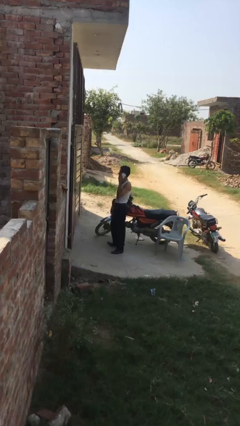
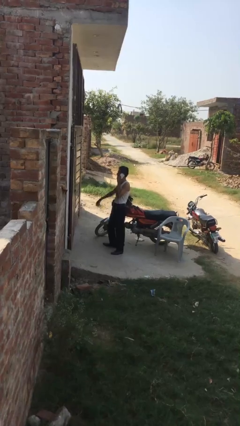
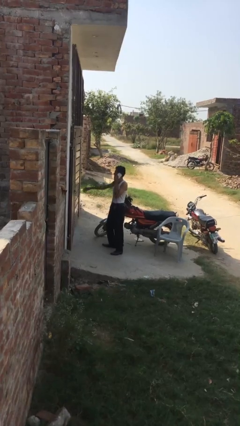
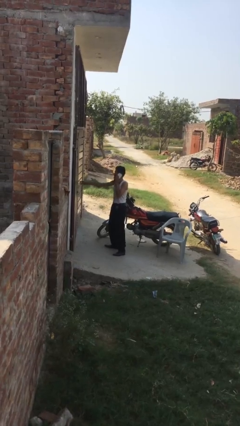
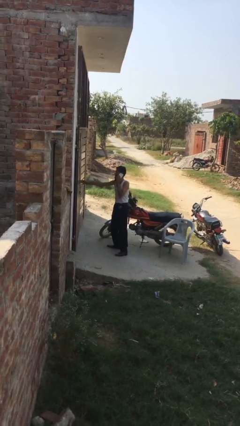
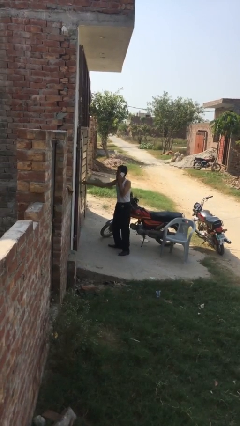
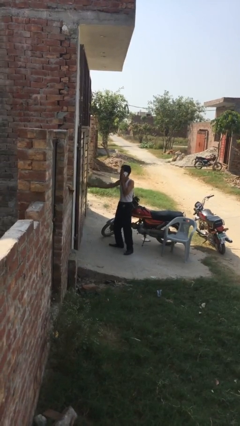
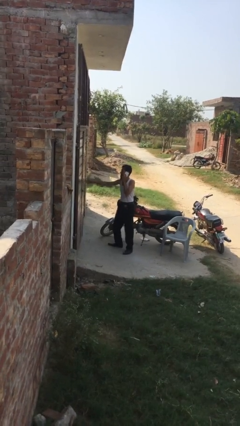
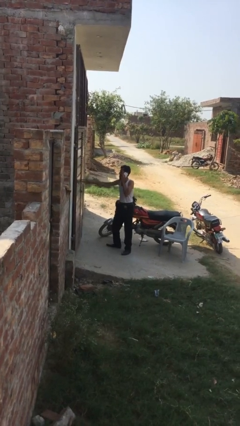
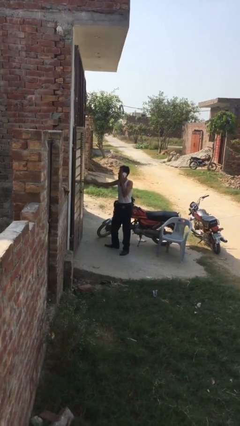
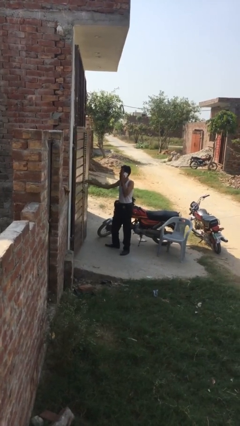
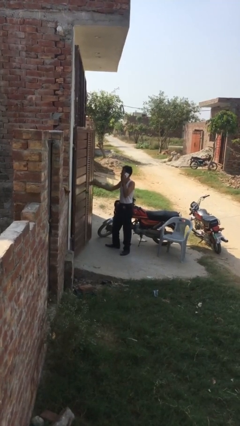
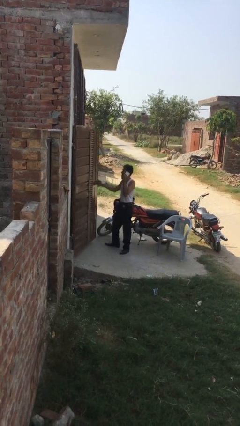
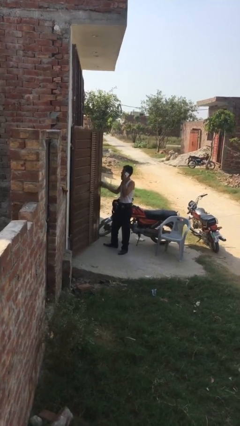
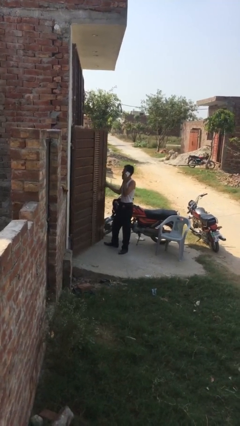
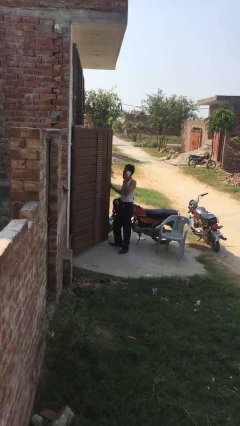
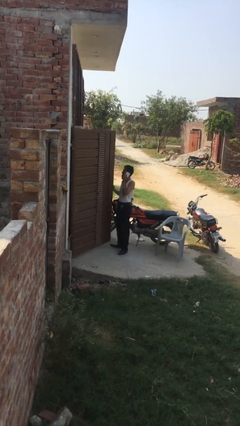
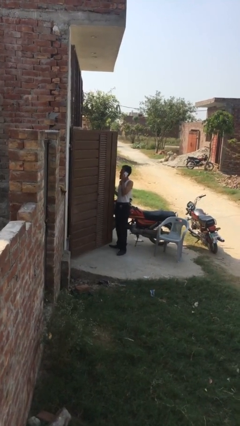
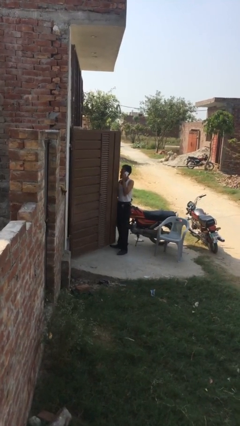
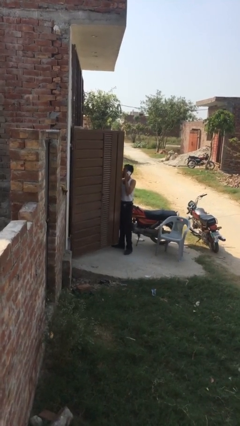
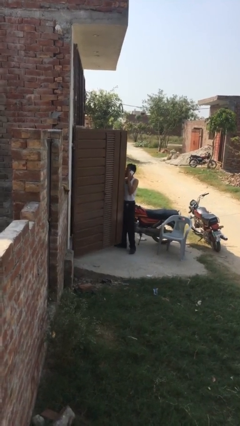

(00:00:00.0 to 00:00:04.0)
person opens facility door

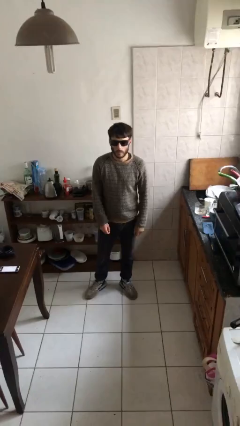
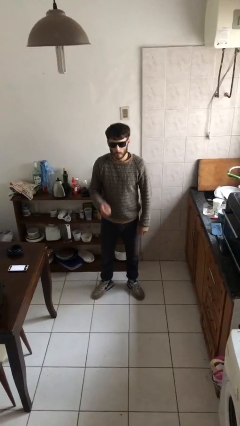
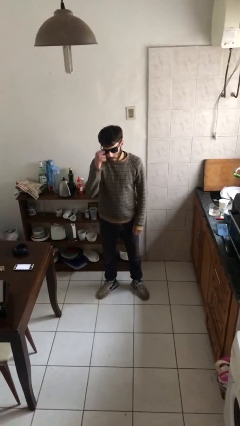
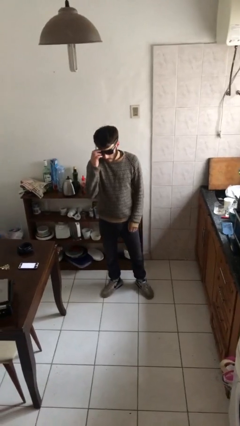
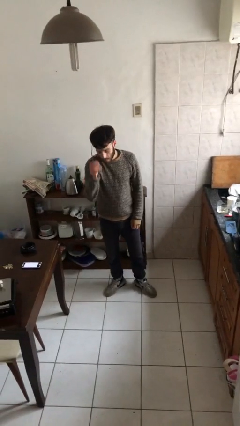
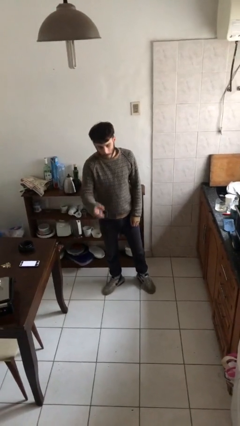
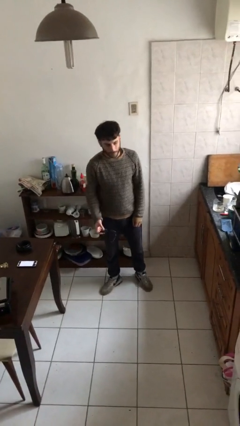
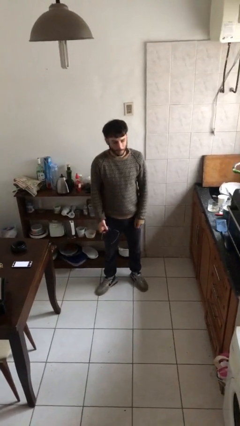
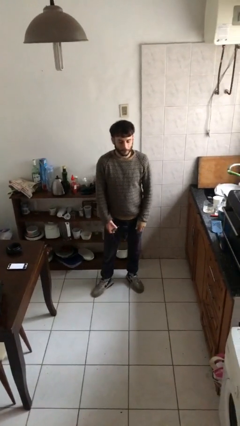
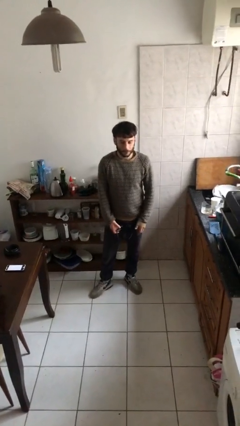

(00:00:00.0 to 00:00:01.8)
person takes off sunglasses

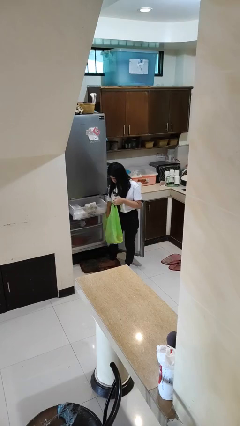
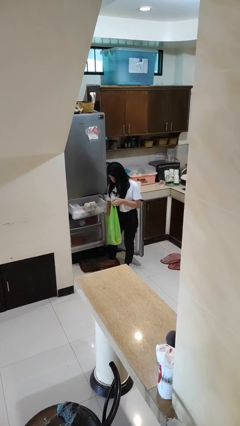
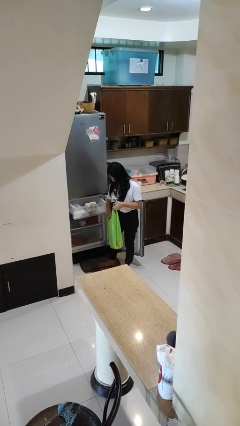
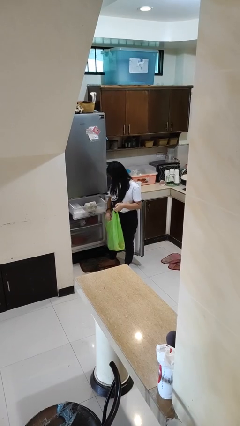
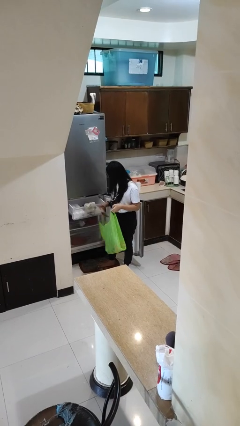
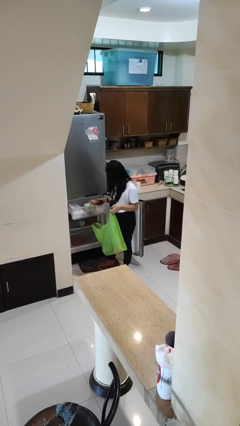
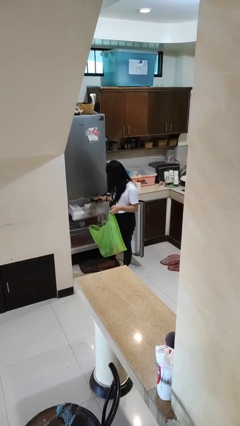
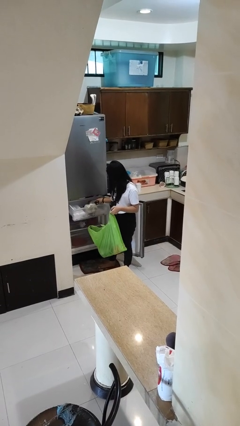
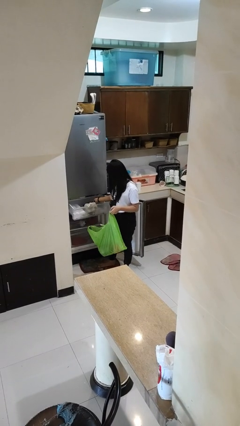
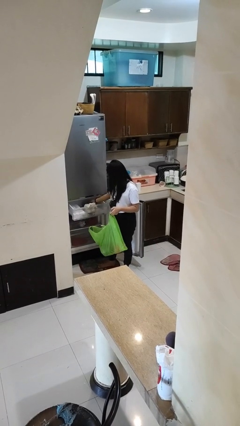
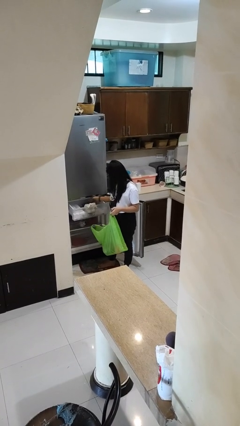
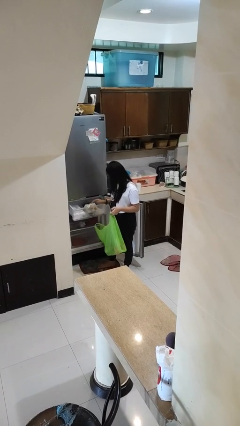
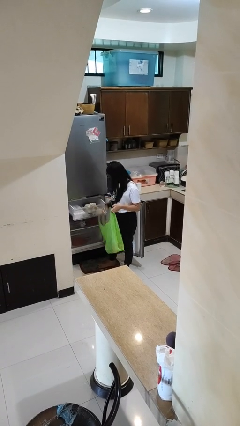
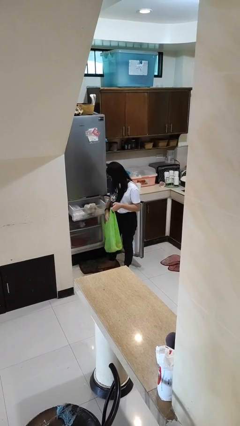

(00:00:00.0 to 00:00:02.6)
person loads groceries into refrigerator

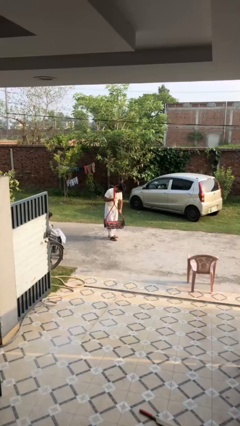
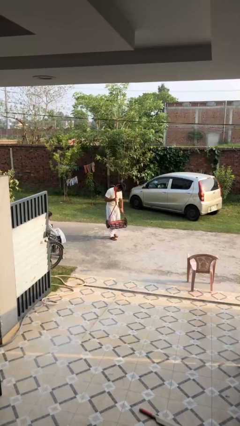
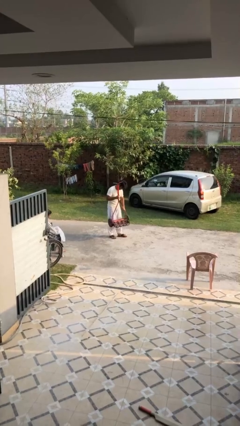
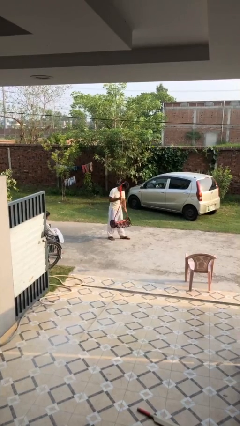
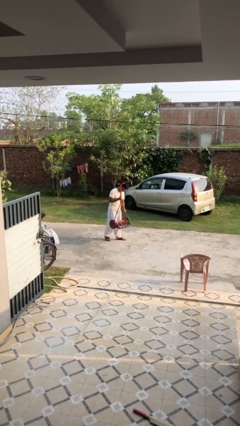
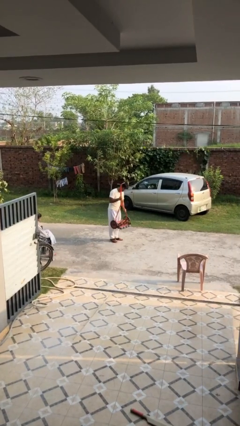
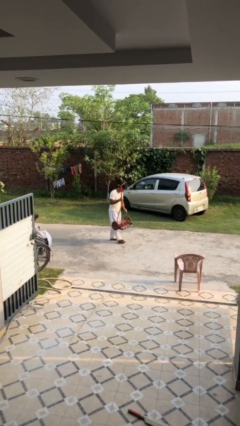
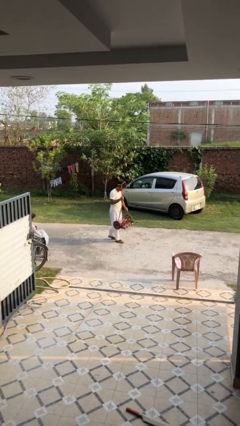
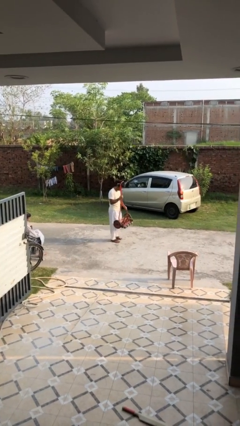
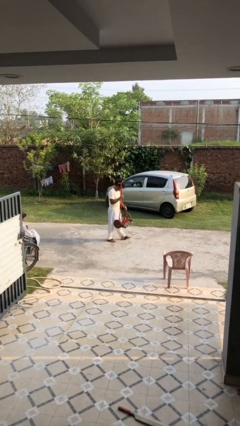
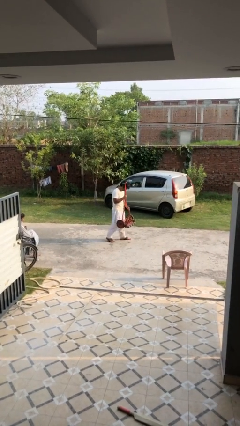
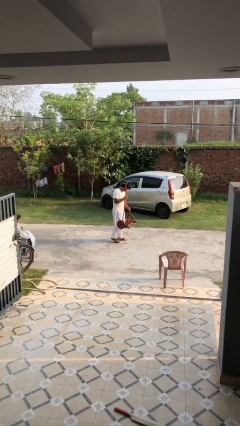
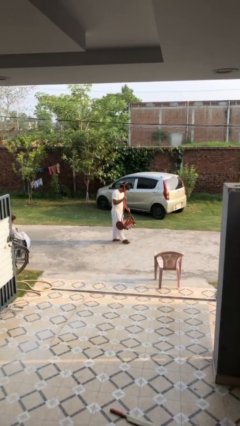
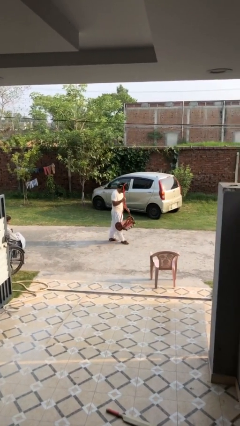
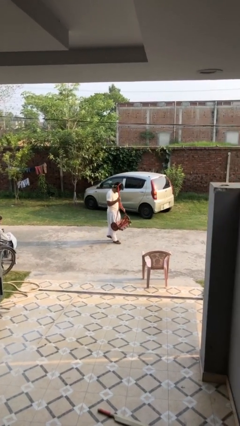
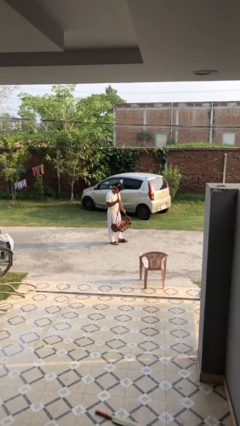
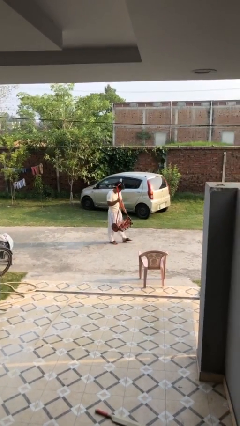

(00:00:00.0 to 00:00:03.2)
person carries heavy object

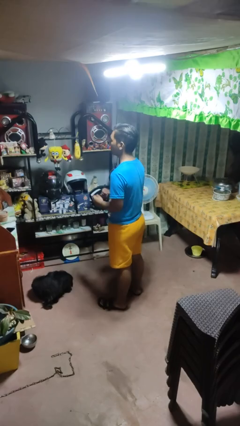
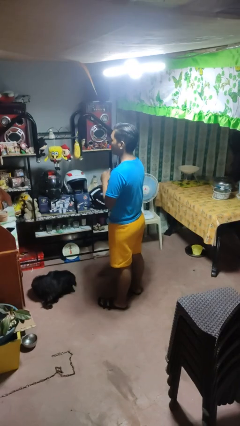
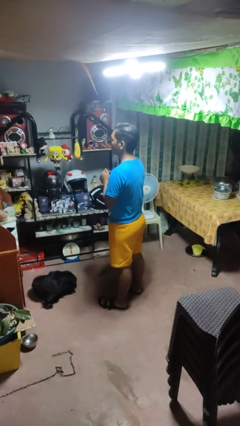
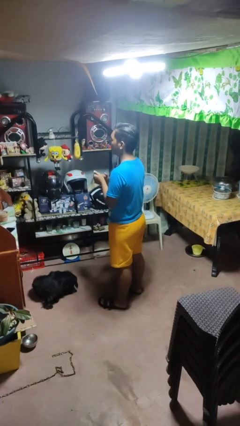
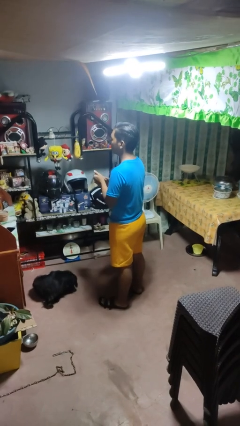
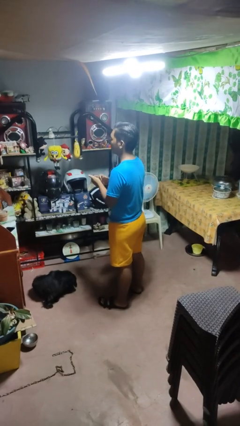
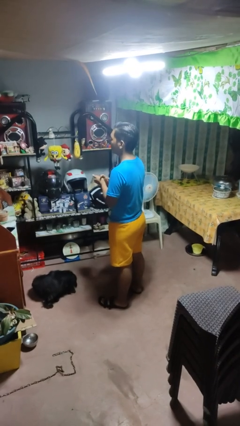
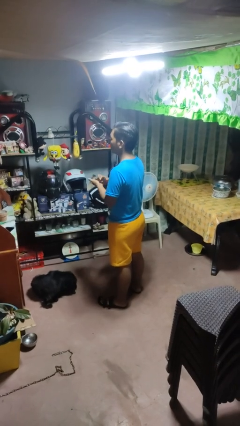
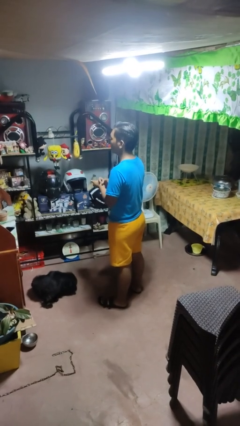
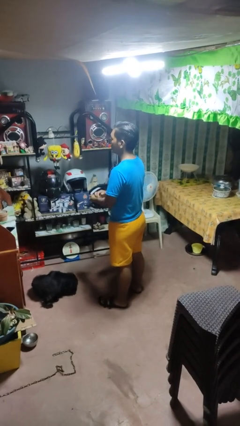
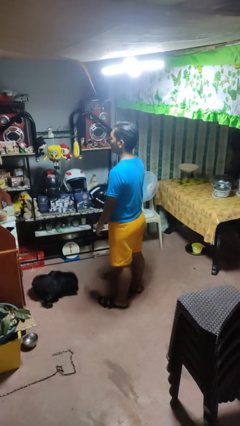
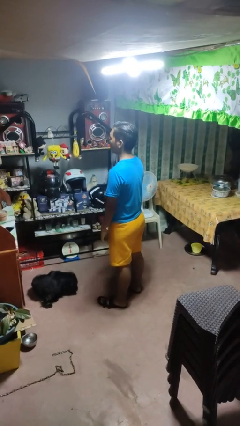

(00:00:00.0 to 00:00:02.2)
person cracks knuckles

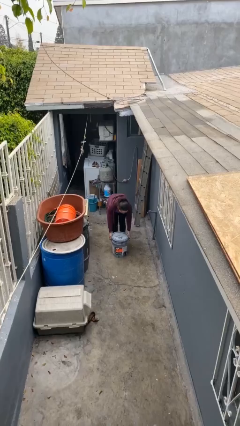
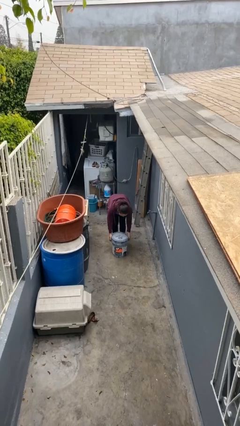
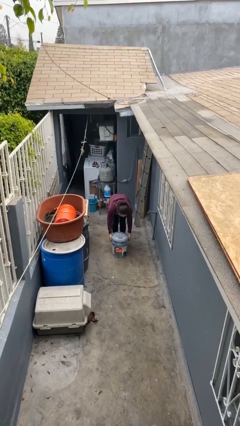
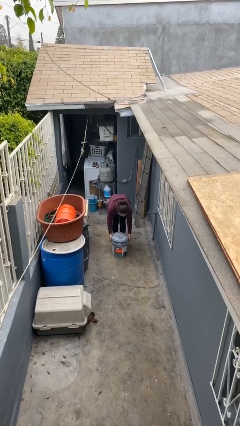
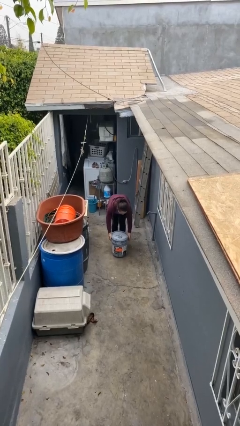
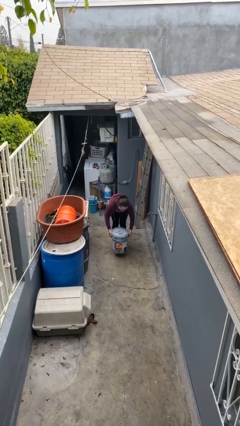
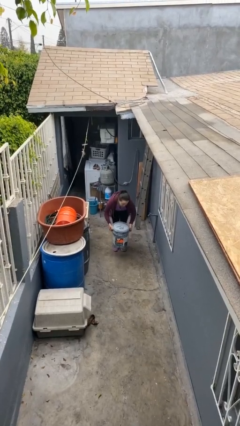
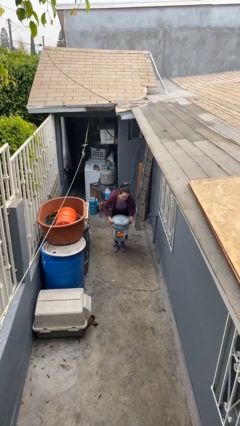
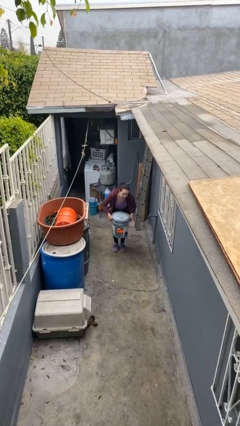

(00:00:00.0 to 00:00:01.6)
person picks up object from floor

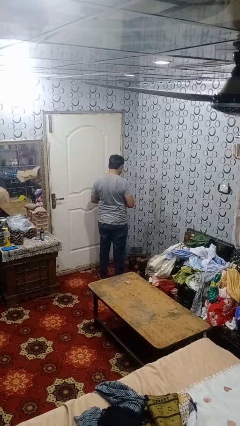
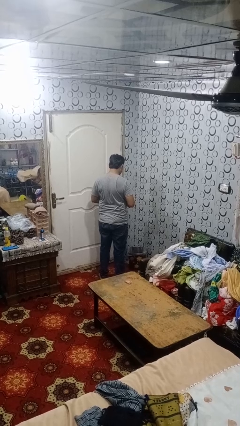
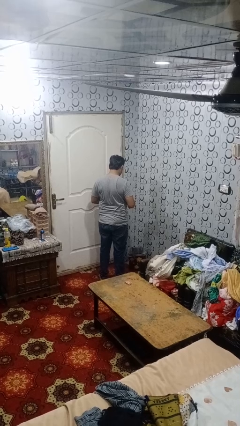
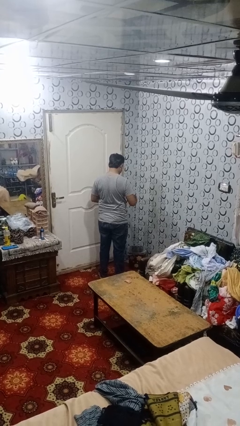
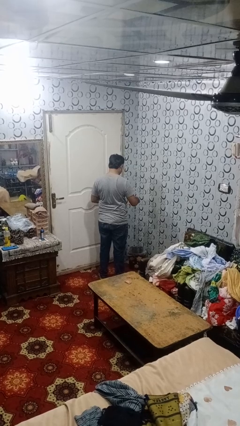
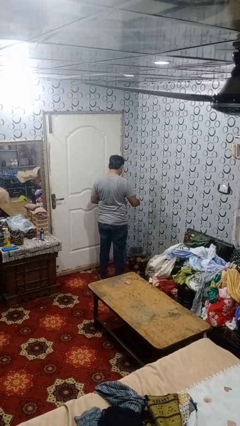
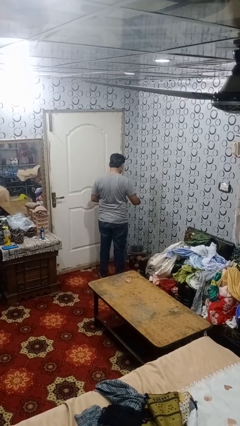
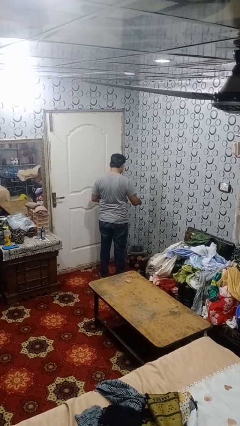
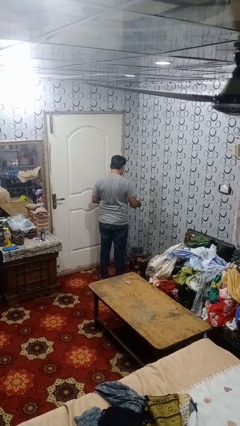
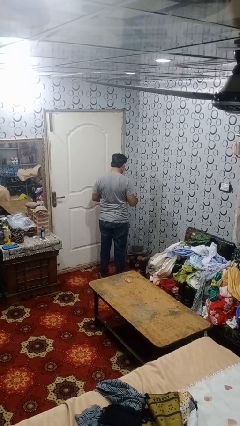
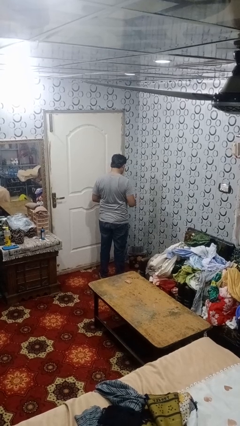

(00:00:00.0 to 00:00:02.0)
person discards trash
